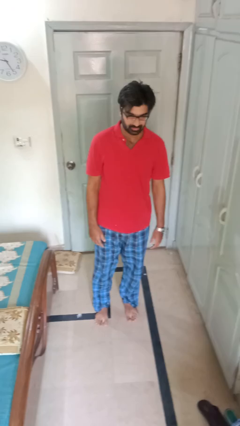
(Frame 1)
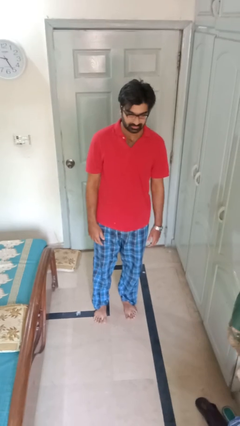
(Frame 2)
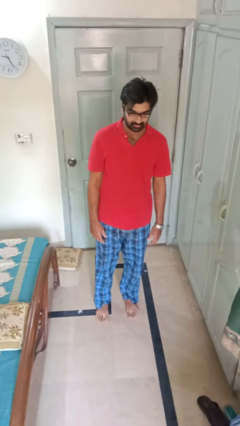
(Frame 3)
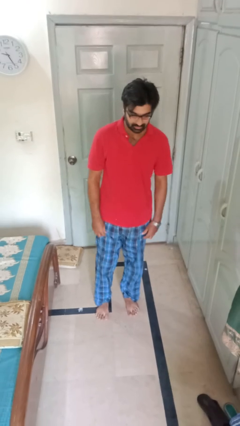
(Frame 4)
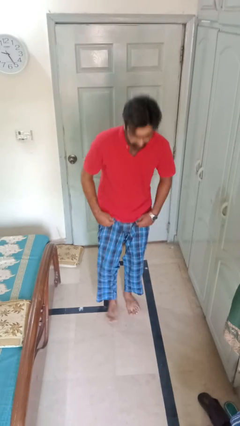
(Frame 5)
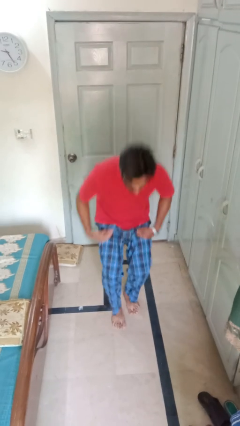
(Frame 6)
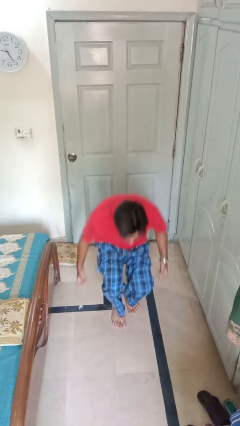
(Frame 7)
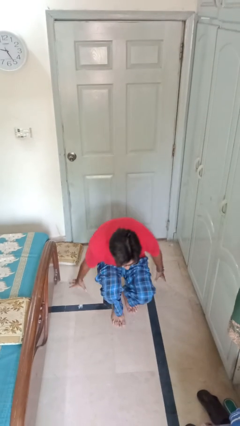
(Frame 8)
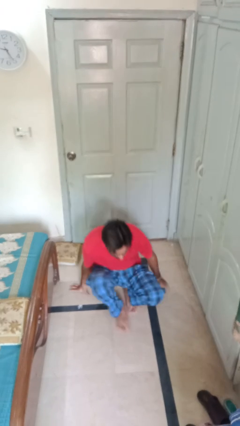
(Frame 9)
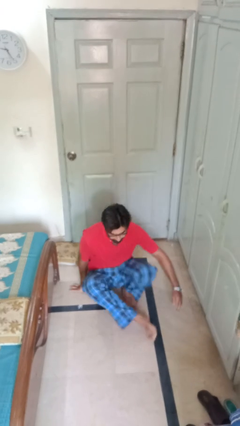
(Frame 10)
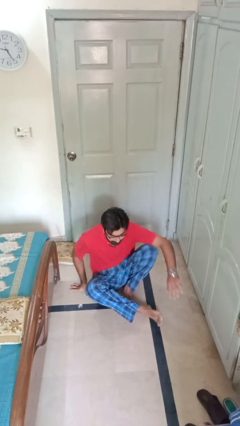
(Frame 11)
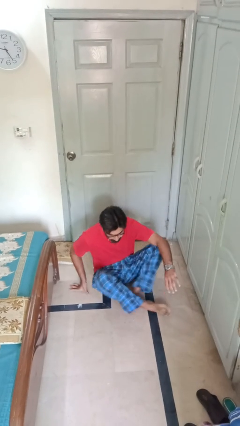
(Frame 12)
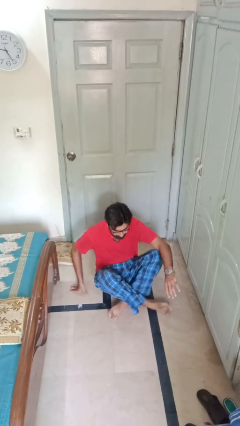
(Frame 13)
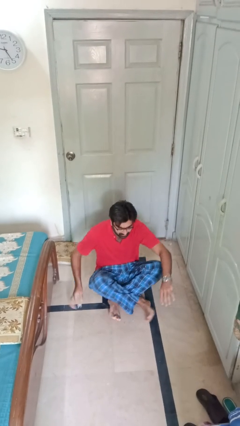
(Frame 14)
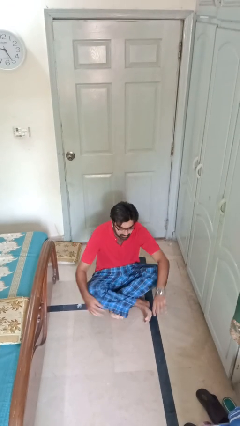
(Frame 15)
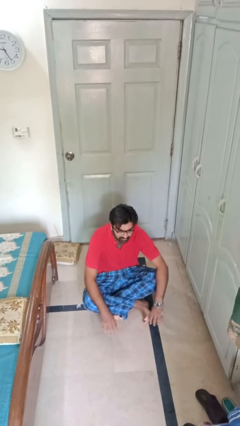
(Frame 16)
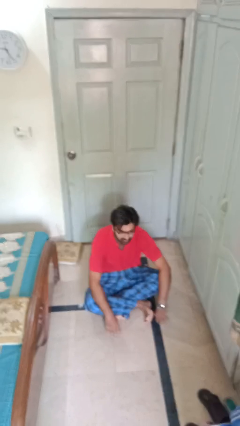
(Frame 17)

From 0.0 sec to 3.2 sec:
person sits crisscross

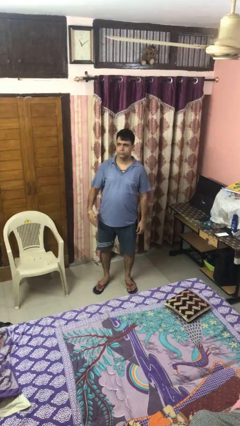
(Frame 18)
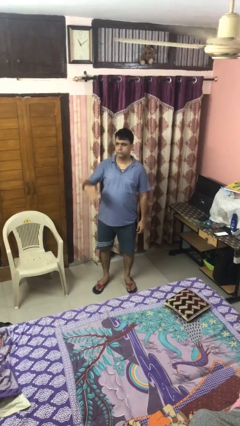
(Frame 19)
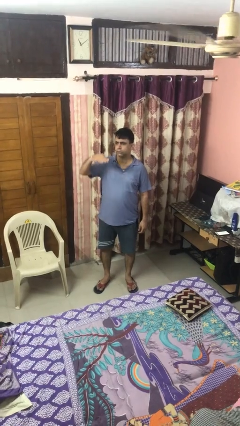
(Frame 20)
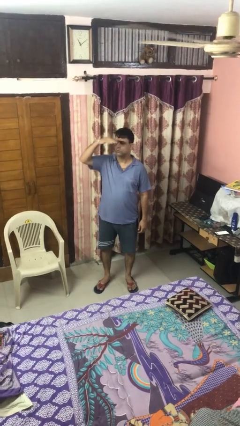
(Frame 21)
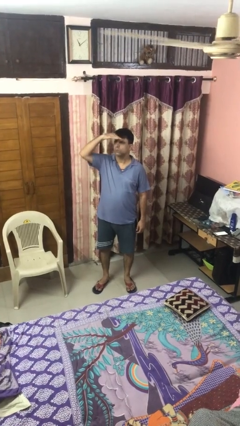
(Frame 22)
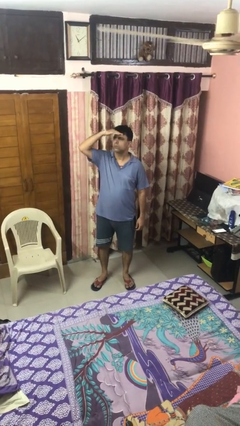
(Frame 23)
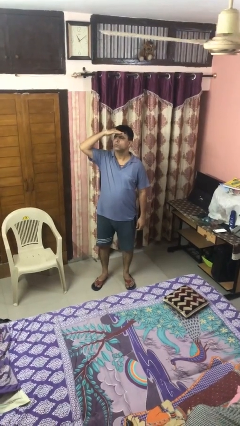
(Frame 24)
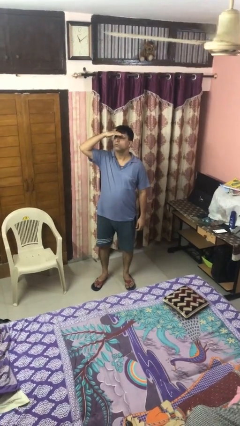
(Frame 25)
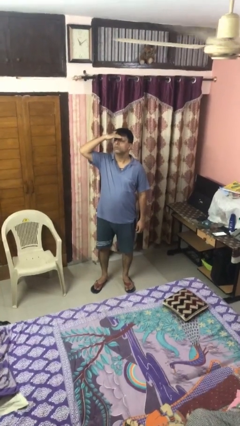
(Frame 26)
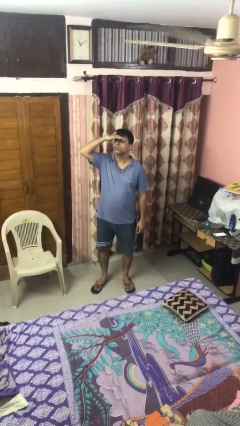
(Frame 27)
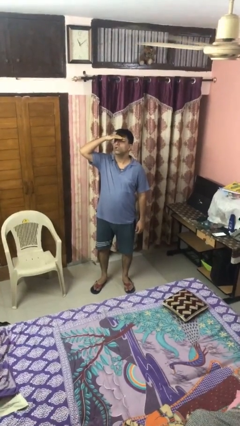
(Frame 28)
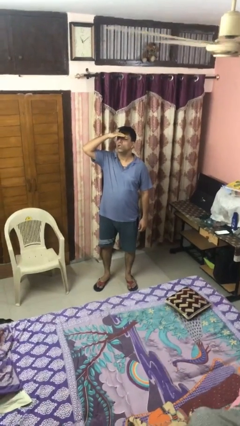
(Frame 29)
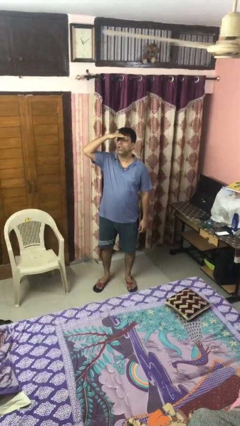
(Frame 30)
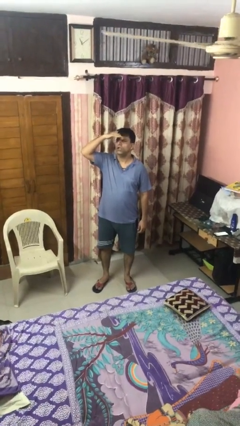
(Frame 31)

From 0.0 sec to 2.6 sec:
person shades eyes

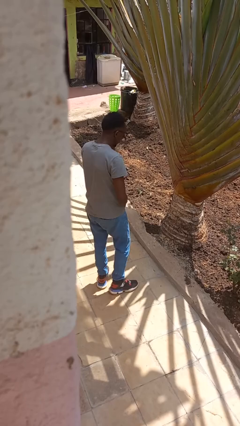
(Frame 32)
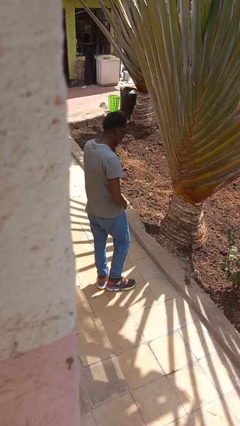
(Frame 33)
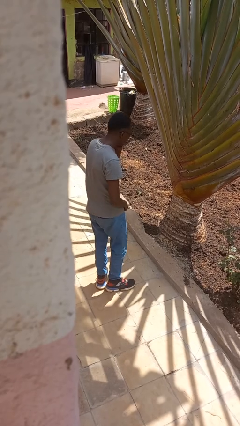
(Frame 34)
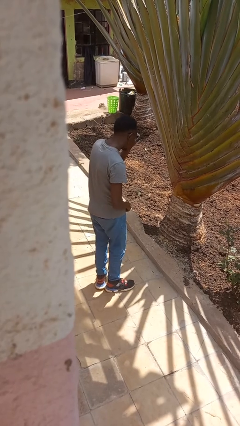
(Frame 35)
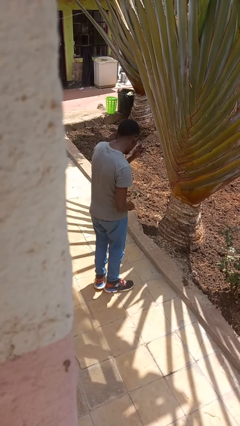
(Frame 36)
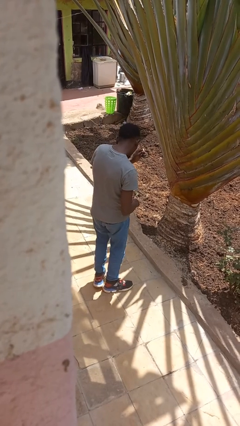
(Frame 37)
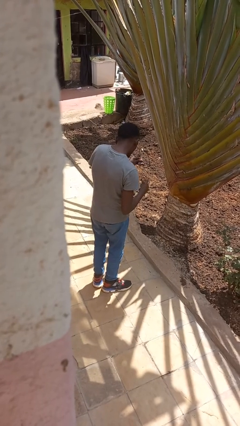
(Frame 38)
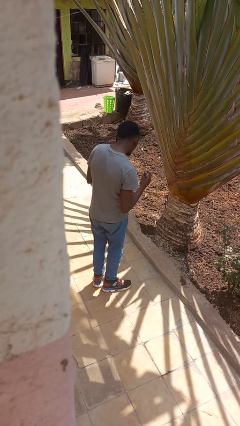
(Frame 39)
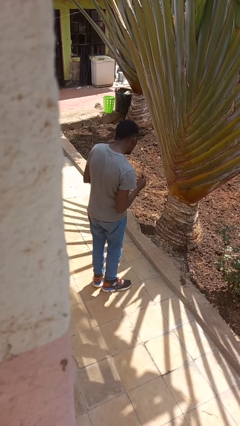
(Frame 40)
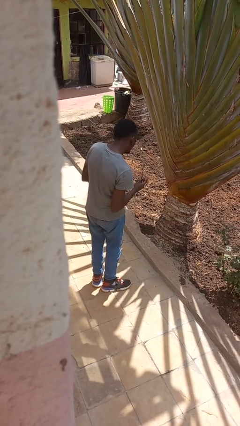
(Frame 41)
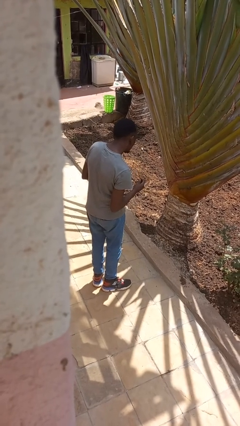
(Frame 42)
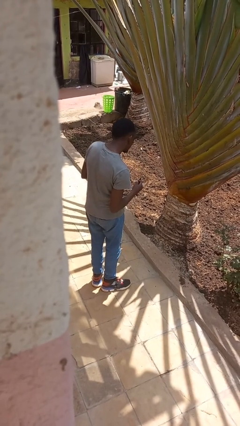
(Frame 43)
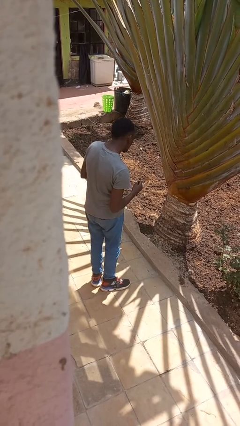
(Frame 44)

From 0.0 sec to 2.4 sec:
person takes off glasses

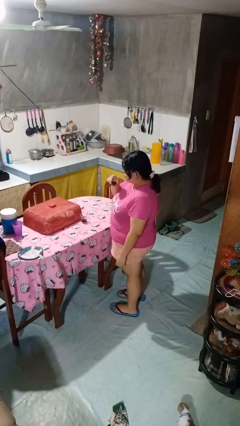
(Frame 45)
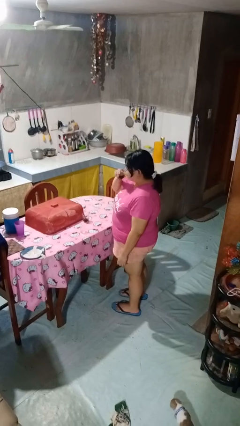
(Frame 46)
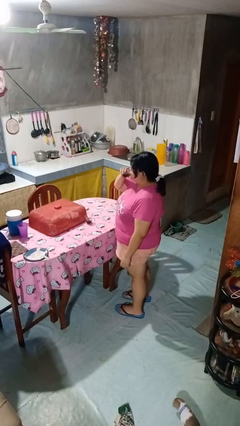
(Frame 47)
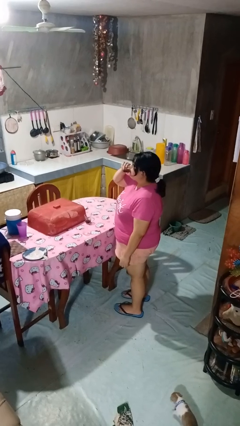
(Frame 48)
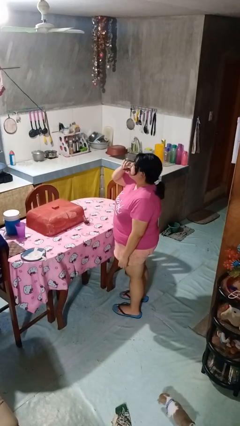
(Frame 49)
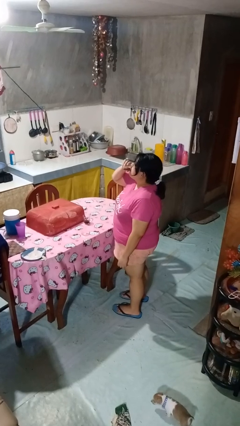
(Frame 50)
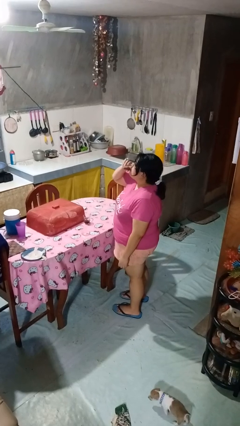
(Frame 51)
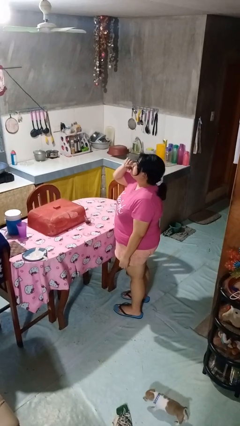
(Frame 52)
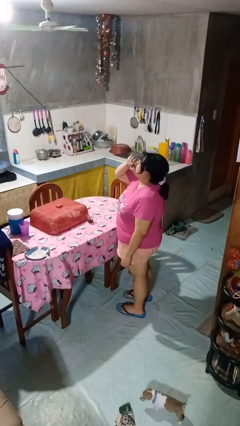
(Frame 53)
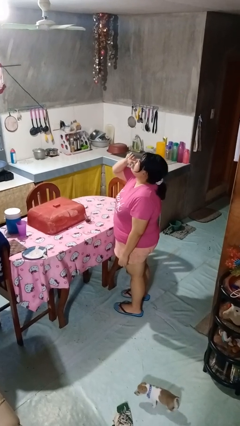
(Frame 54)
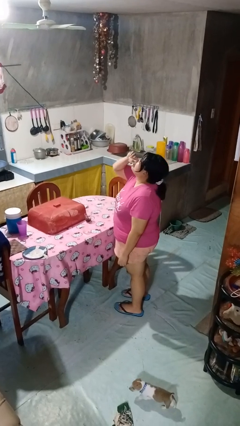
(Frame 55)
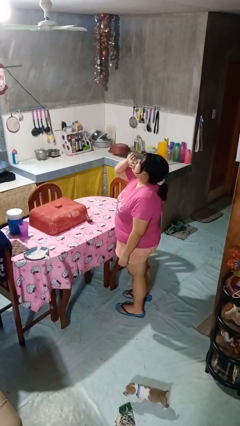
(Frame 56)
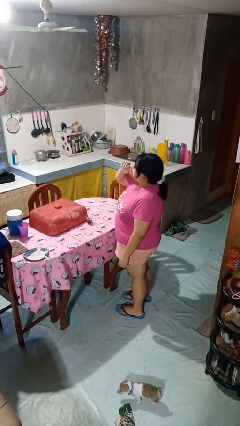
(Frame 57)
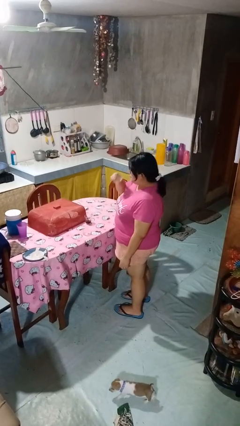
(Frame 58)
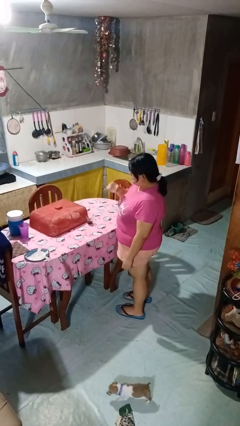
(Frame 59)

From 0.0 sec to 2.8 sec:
person drinks from shotglass

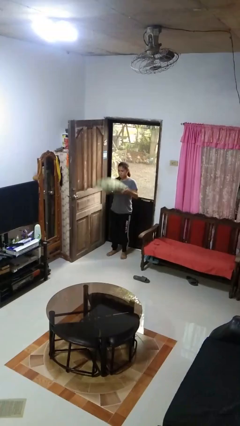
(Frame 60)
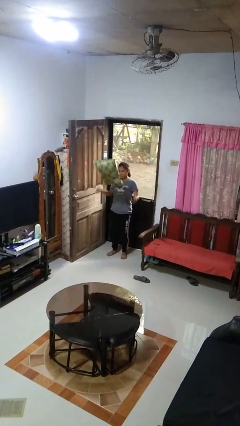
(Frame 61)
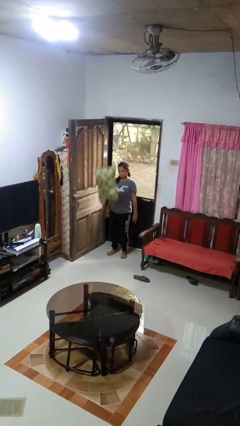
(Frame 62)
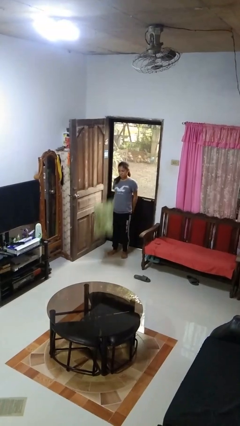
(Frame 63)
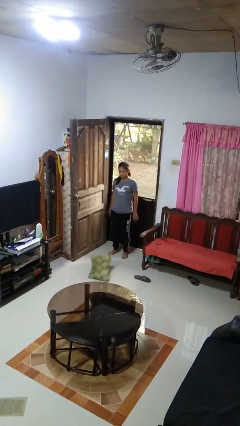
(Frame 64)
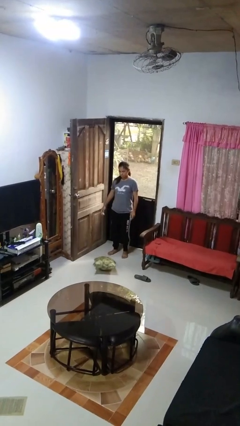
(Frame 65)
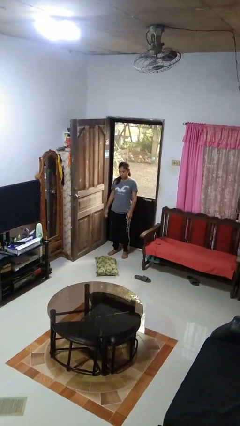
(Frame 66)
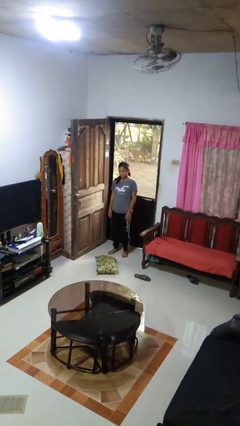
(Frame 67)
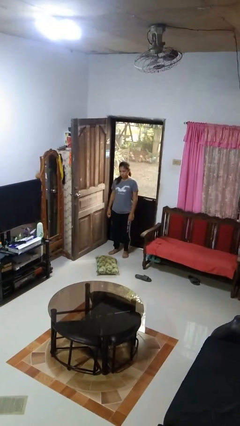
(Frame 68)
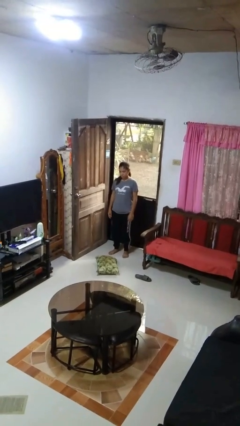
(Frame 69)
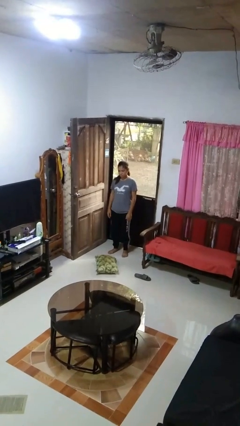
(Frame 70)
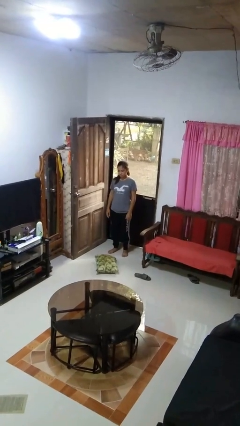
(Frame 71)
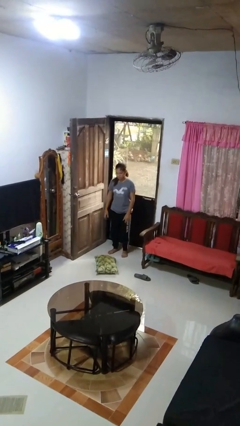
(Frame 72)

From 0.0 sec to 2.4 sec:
person throws object into air

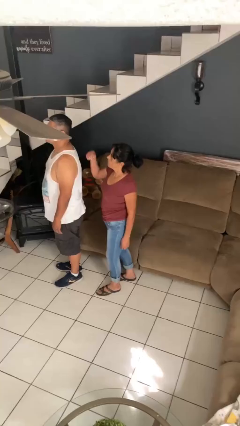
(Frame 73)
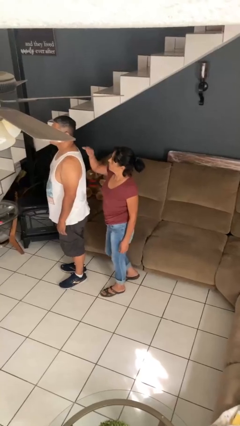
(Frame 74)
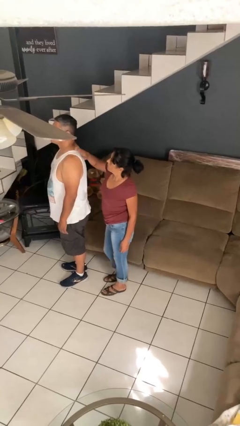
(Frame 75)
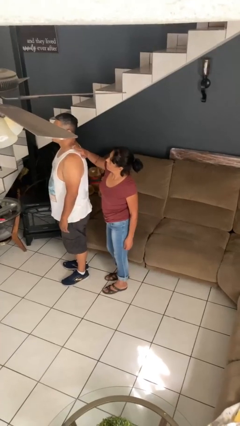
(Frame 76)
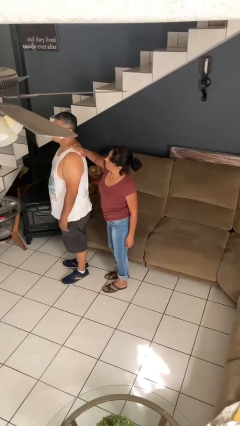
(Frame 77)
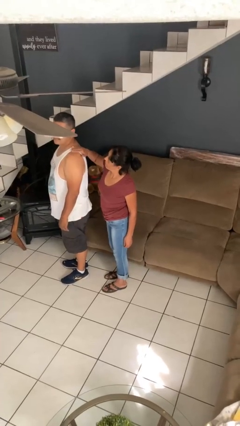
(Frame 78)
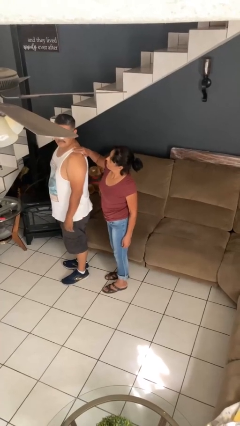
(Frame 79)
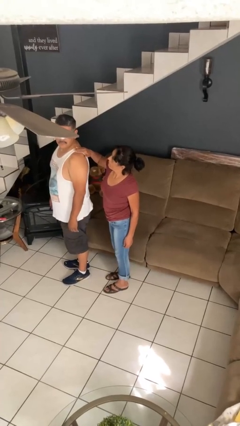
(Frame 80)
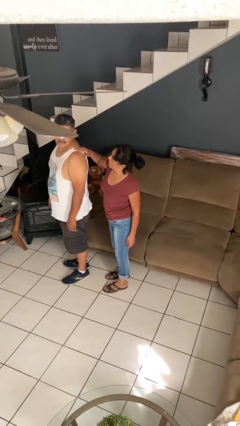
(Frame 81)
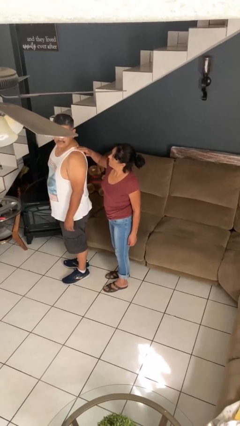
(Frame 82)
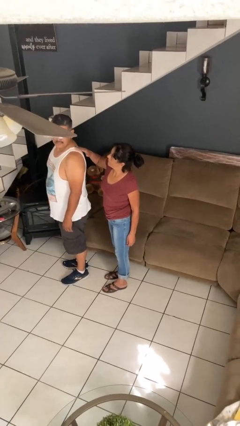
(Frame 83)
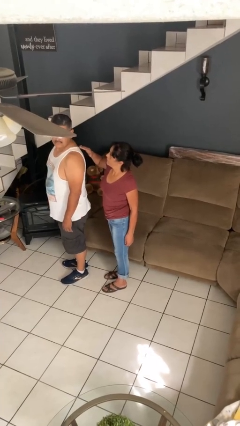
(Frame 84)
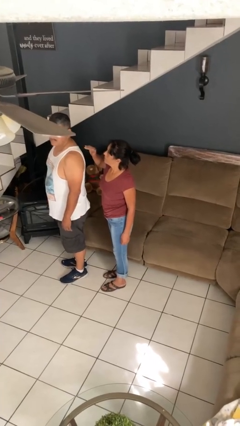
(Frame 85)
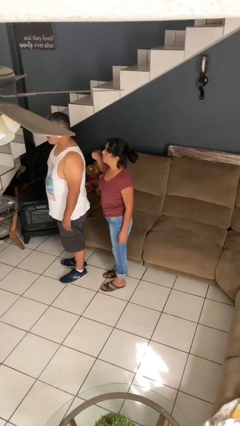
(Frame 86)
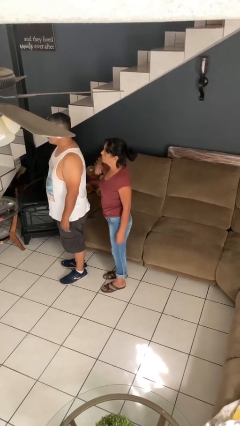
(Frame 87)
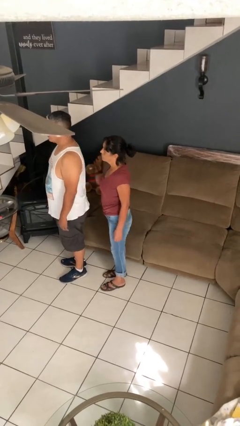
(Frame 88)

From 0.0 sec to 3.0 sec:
person touches back of person

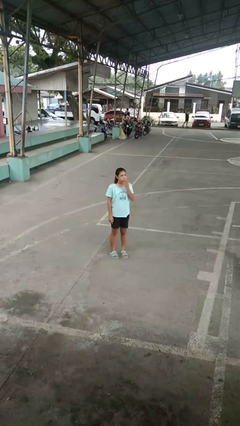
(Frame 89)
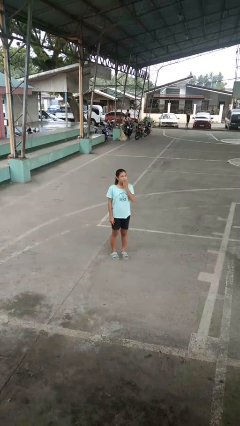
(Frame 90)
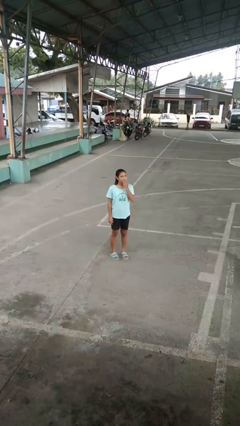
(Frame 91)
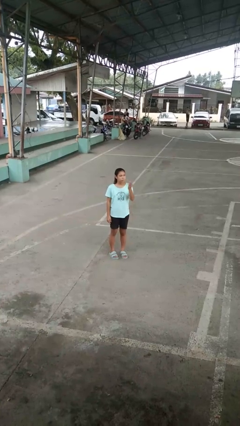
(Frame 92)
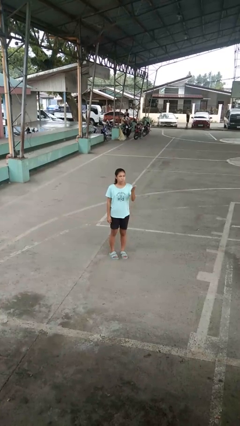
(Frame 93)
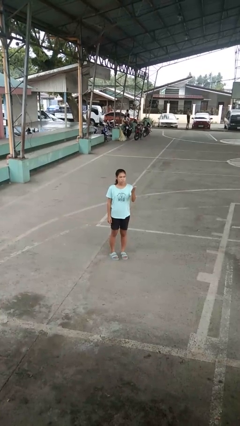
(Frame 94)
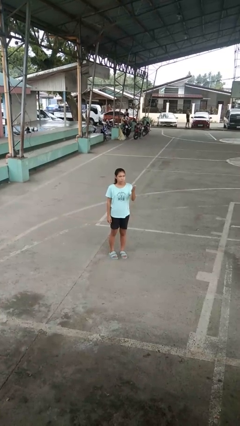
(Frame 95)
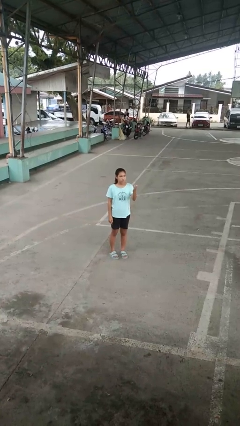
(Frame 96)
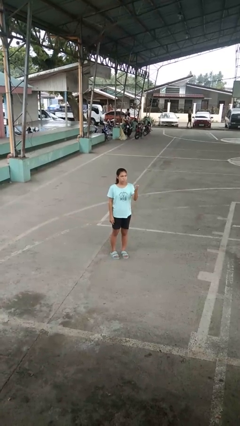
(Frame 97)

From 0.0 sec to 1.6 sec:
person gestures blow kiss
